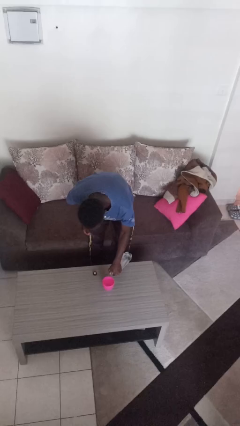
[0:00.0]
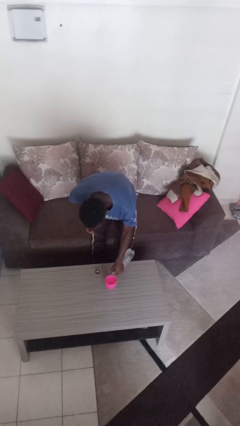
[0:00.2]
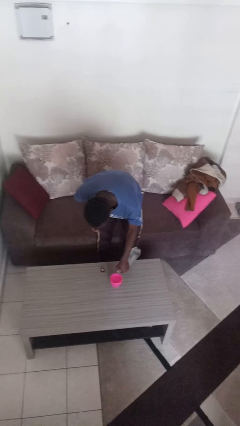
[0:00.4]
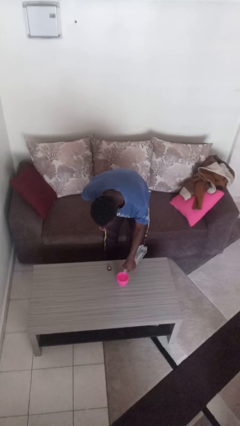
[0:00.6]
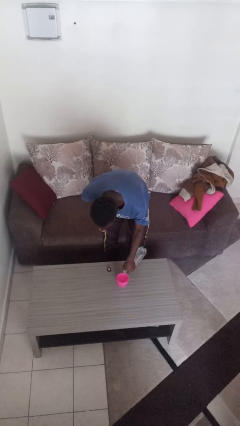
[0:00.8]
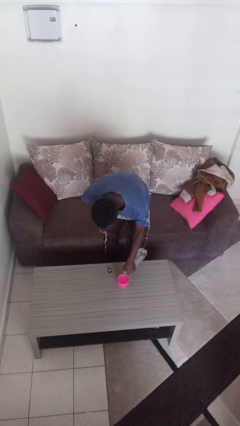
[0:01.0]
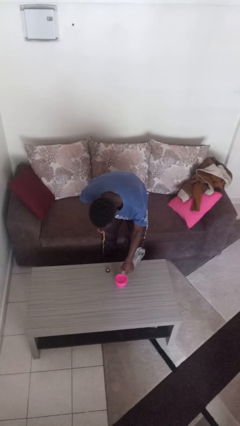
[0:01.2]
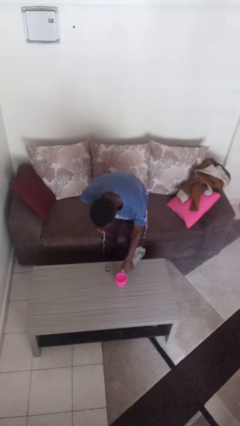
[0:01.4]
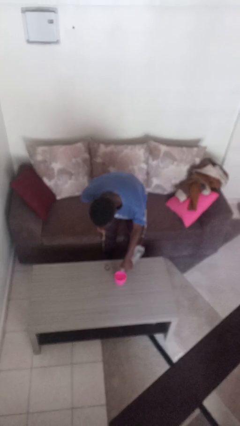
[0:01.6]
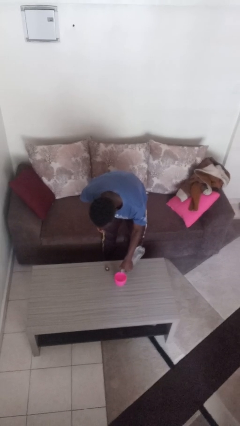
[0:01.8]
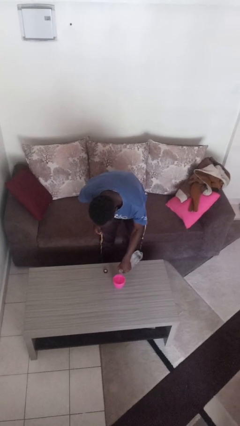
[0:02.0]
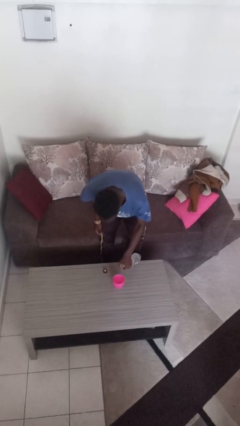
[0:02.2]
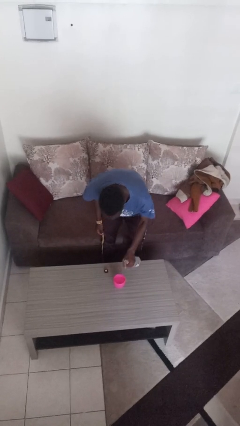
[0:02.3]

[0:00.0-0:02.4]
person pours liquid into cup

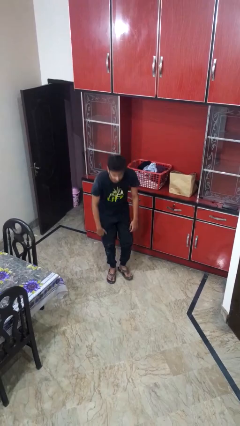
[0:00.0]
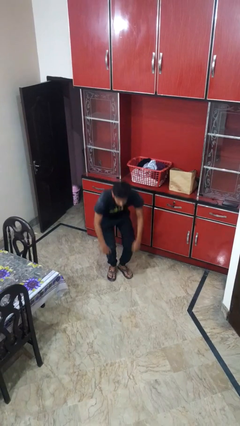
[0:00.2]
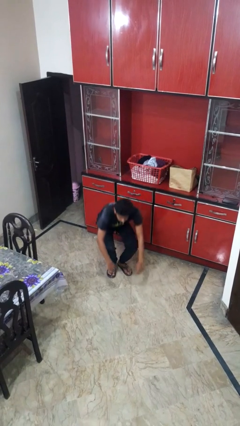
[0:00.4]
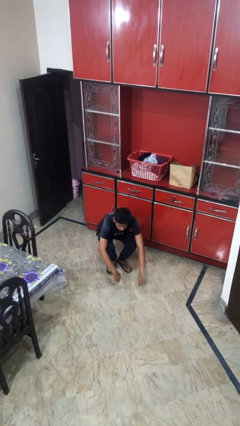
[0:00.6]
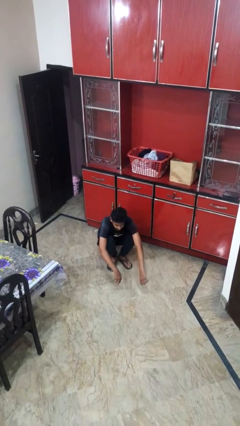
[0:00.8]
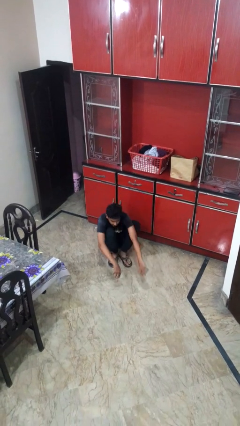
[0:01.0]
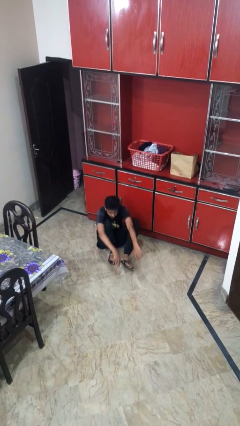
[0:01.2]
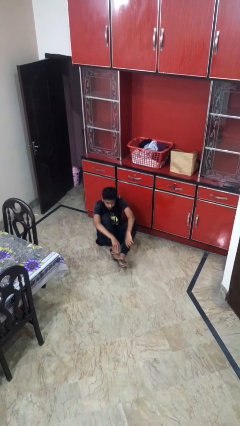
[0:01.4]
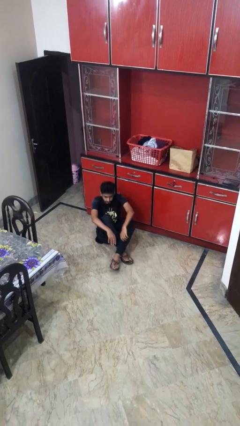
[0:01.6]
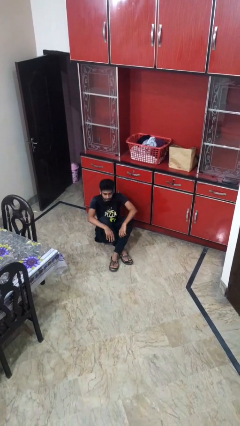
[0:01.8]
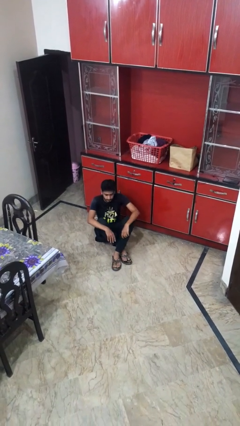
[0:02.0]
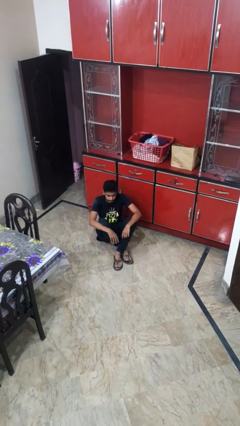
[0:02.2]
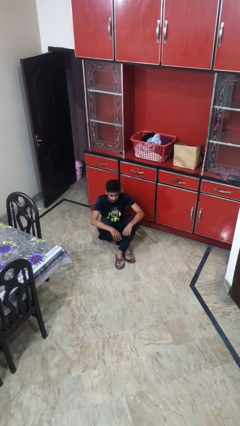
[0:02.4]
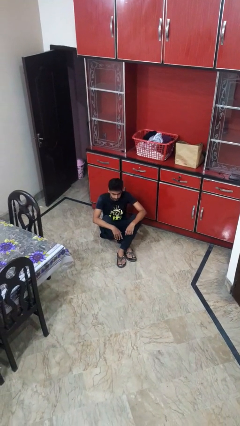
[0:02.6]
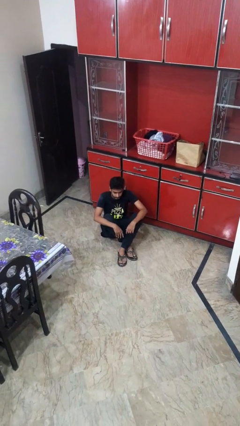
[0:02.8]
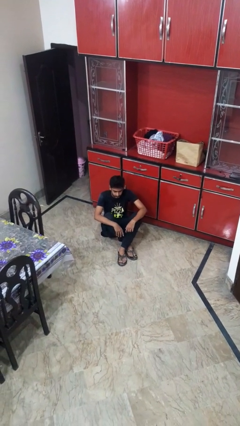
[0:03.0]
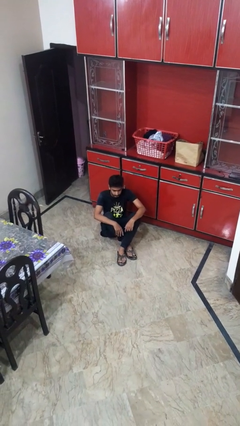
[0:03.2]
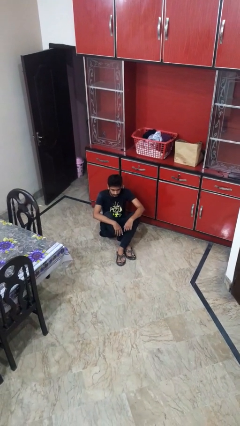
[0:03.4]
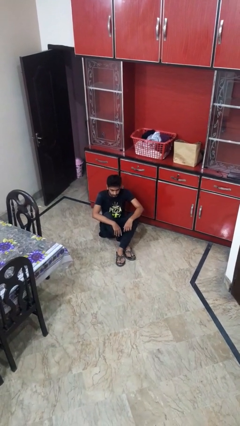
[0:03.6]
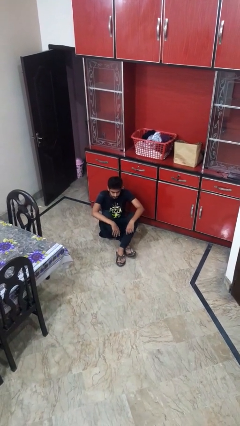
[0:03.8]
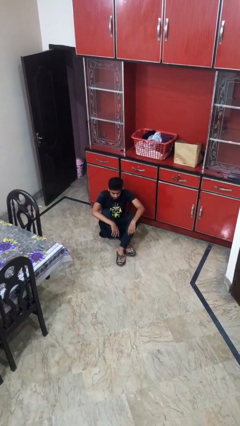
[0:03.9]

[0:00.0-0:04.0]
person sits crisscross

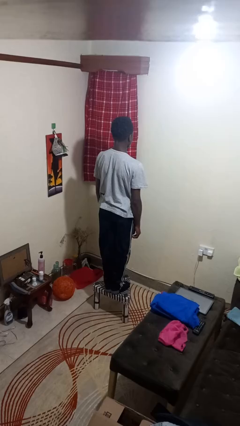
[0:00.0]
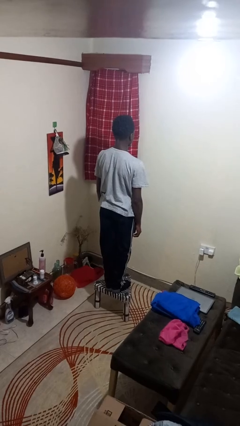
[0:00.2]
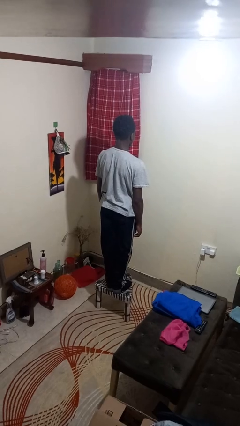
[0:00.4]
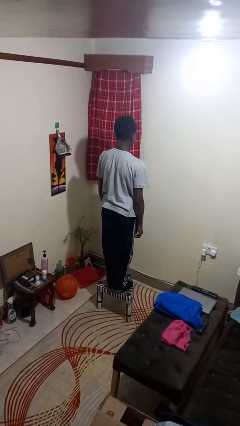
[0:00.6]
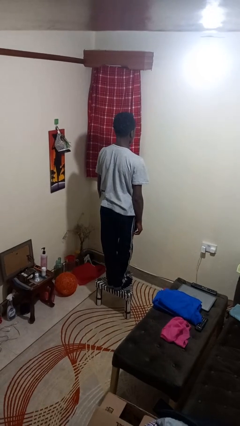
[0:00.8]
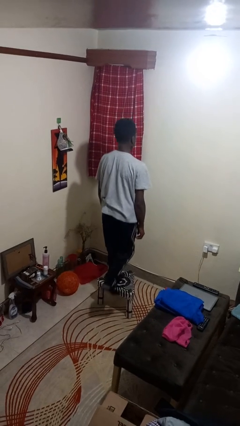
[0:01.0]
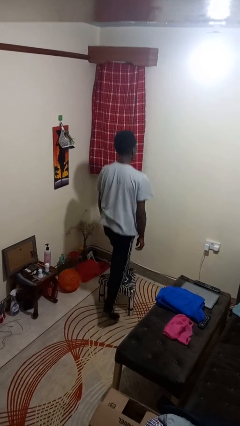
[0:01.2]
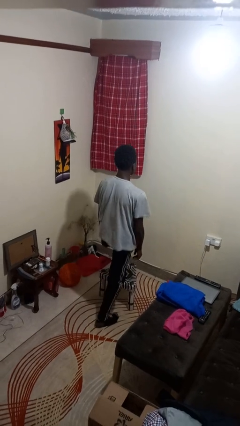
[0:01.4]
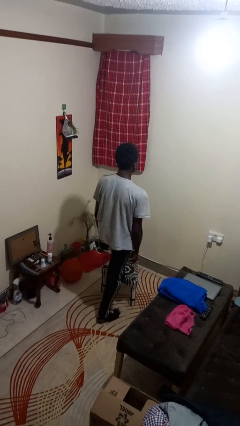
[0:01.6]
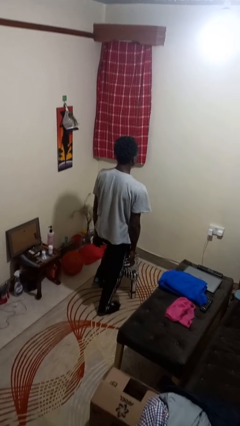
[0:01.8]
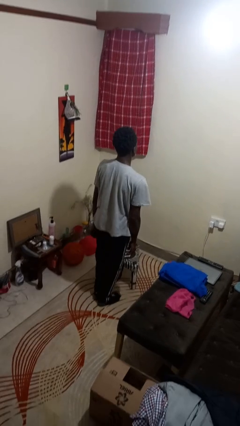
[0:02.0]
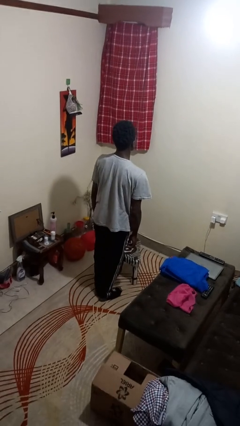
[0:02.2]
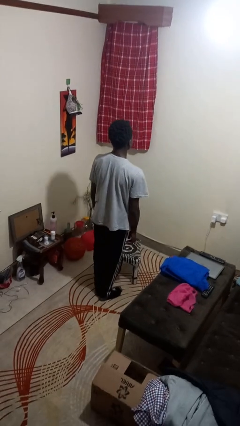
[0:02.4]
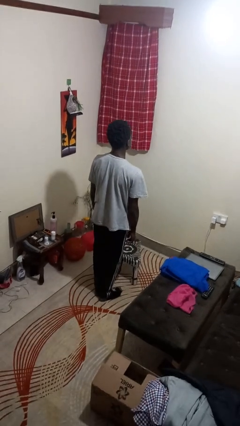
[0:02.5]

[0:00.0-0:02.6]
person climbs off chair

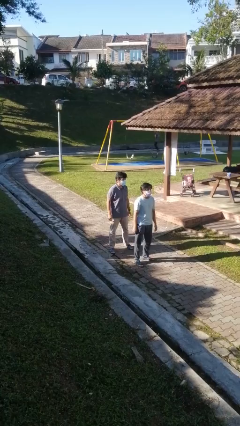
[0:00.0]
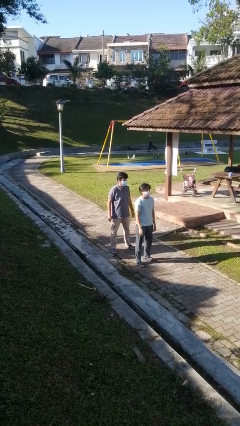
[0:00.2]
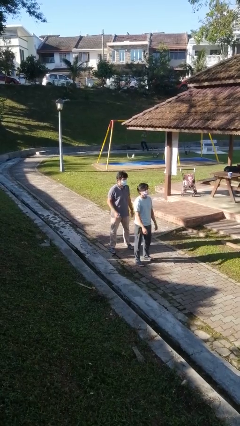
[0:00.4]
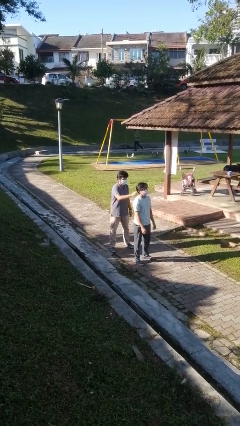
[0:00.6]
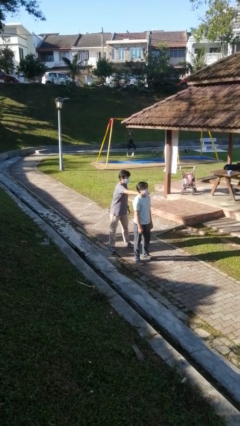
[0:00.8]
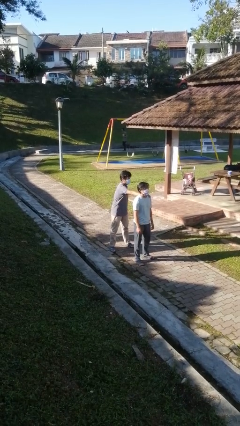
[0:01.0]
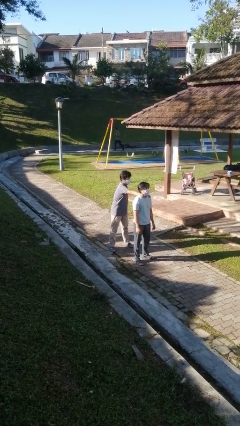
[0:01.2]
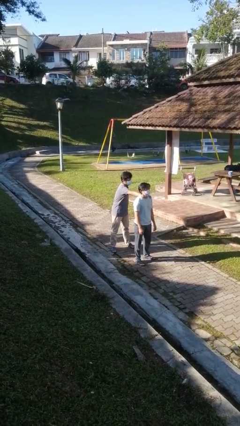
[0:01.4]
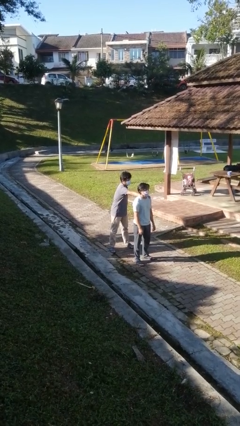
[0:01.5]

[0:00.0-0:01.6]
person grabs person by shoulder

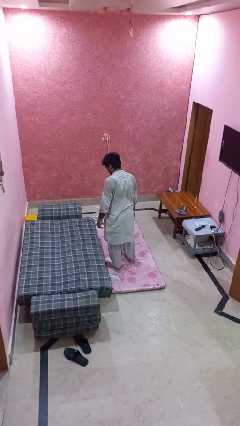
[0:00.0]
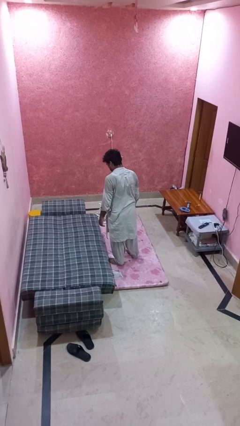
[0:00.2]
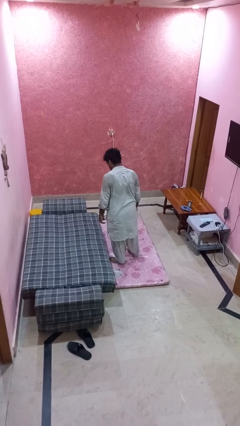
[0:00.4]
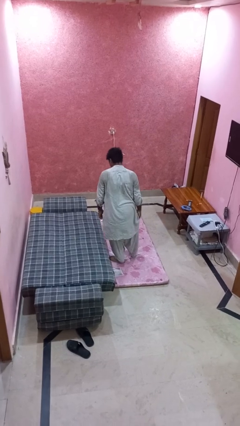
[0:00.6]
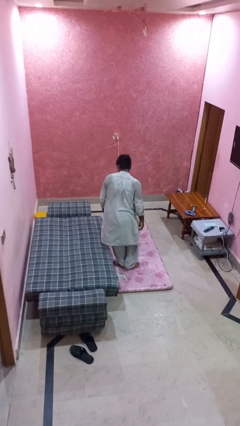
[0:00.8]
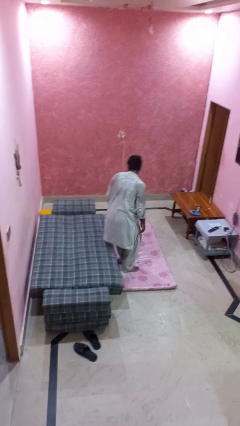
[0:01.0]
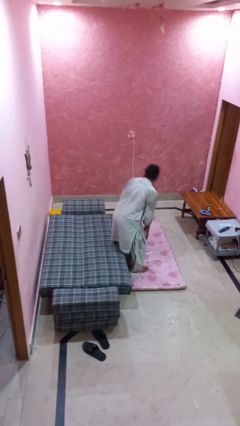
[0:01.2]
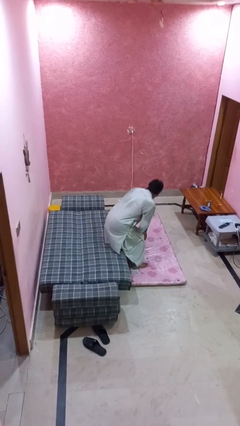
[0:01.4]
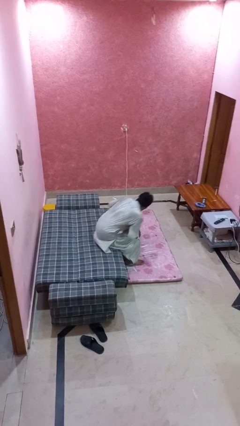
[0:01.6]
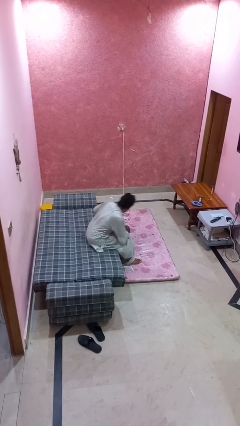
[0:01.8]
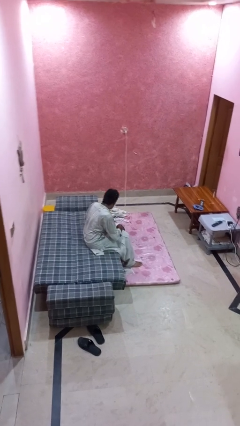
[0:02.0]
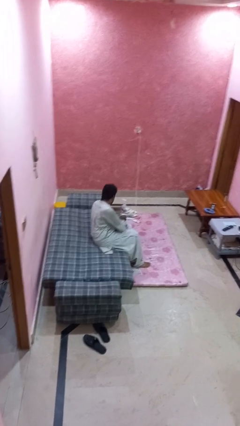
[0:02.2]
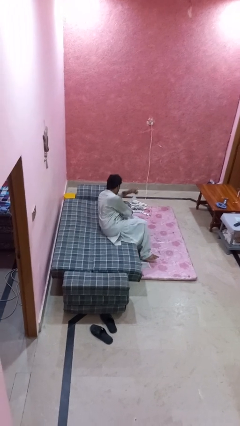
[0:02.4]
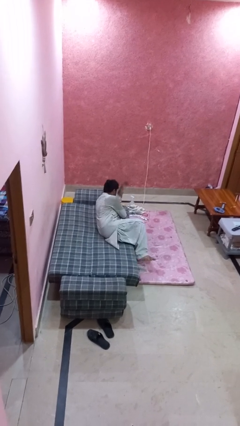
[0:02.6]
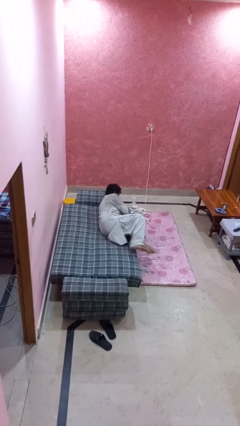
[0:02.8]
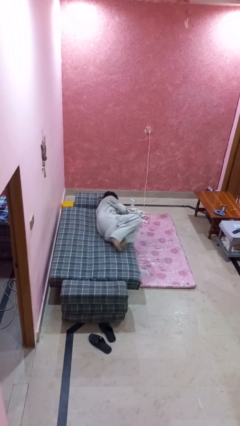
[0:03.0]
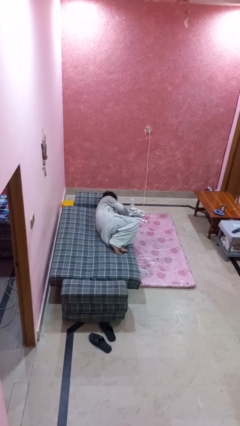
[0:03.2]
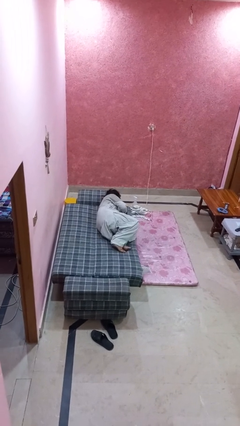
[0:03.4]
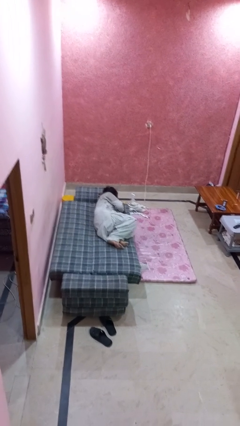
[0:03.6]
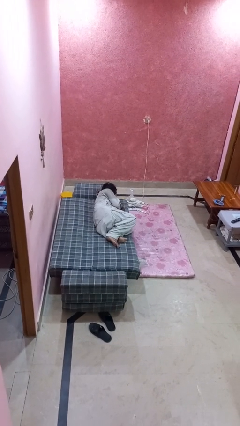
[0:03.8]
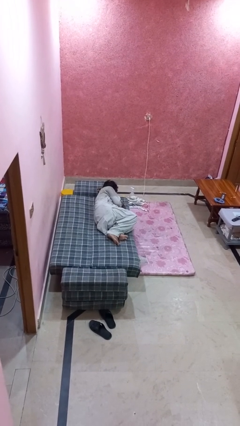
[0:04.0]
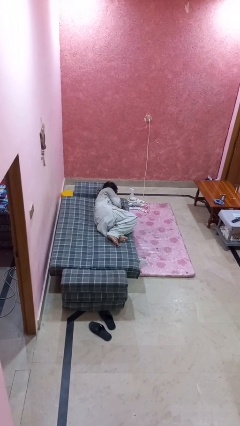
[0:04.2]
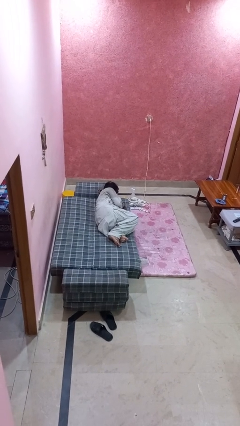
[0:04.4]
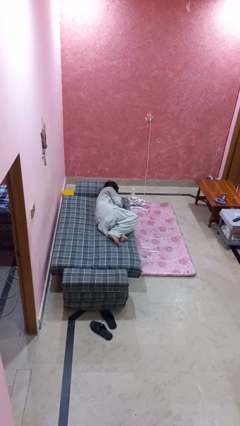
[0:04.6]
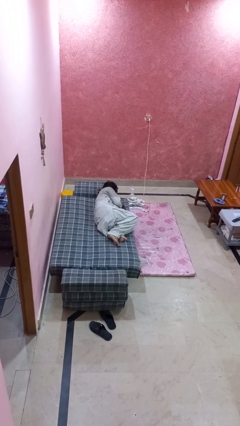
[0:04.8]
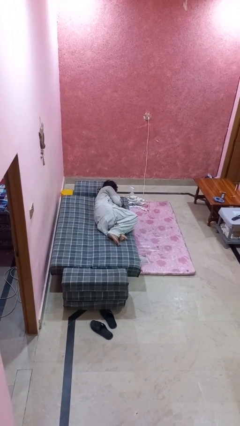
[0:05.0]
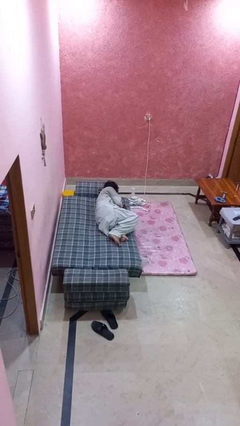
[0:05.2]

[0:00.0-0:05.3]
person lies down on bed

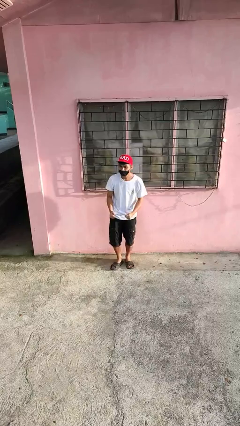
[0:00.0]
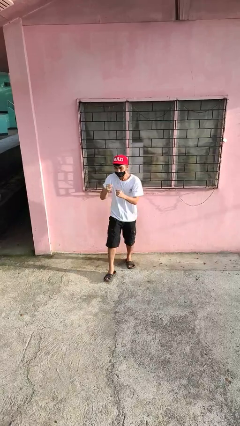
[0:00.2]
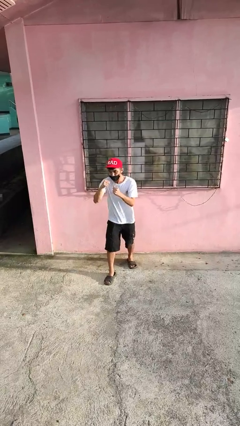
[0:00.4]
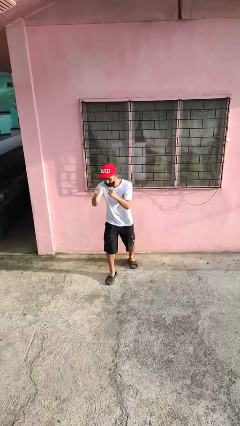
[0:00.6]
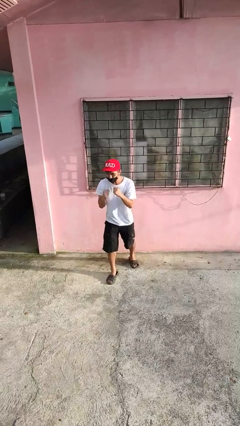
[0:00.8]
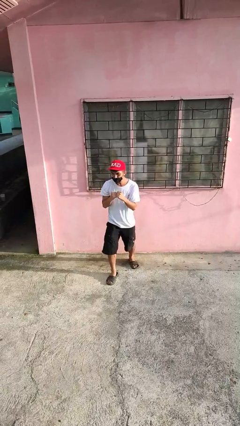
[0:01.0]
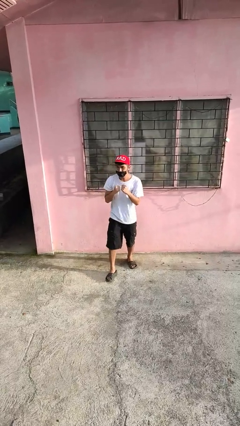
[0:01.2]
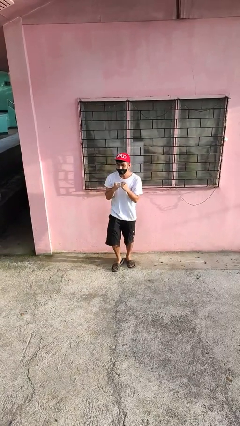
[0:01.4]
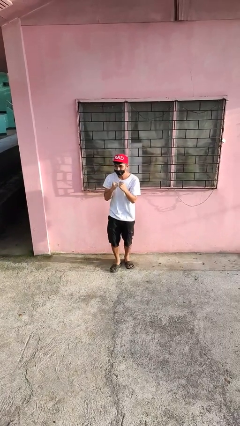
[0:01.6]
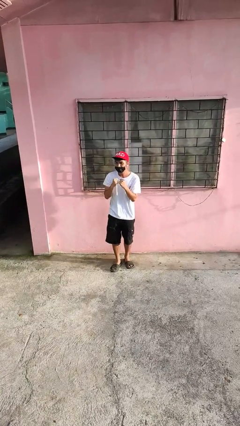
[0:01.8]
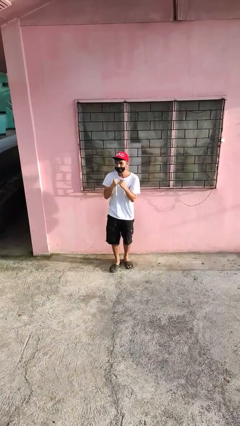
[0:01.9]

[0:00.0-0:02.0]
person punches
